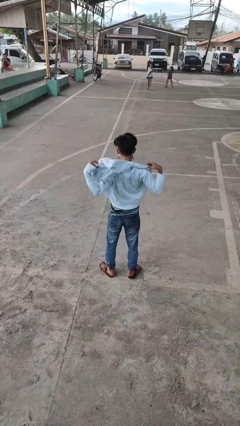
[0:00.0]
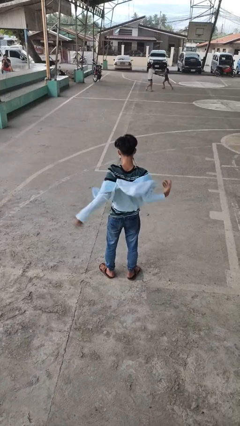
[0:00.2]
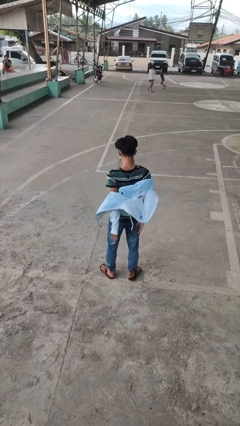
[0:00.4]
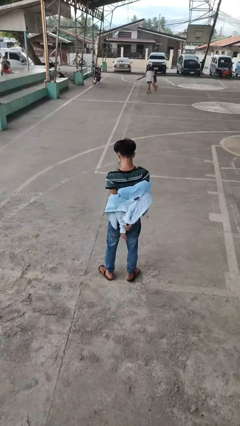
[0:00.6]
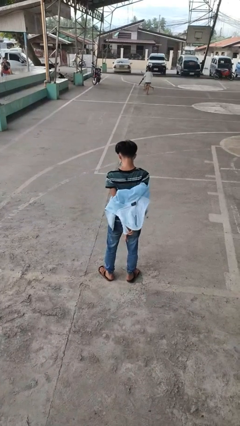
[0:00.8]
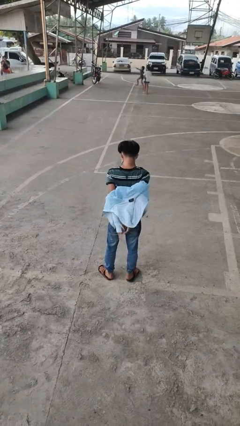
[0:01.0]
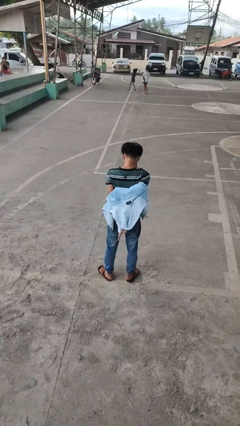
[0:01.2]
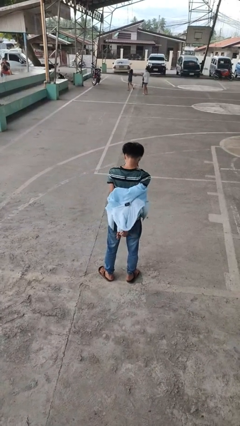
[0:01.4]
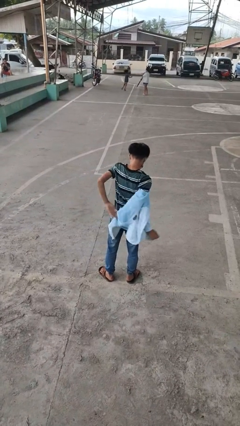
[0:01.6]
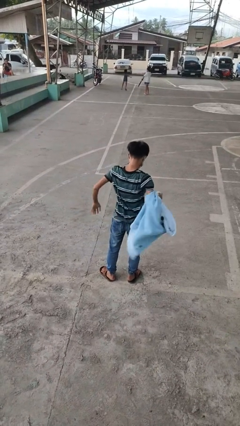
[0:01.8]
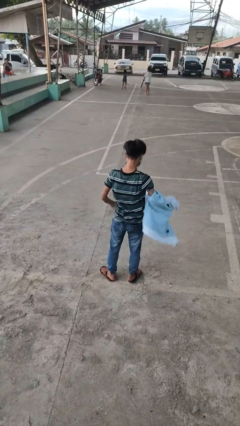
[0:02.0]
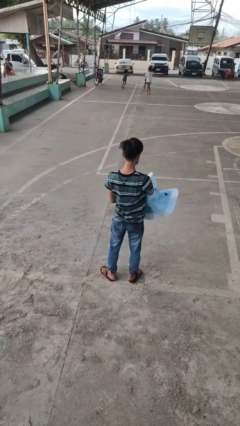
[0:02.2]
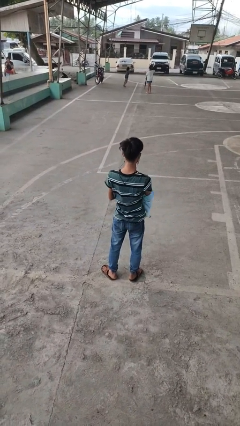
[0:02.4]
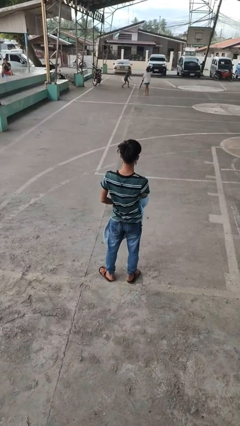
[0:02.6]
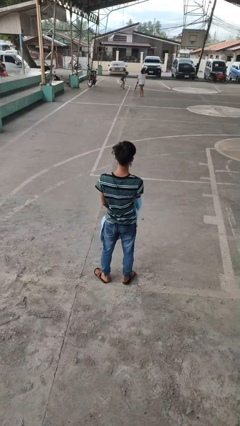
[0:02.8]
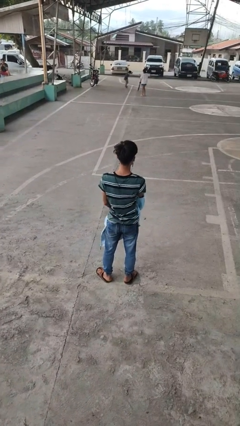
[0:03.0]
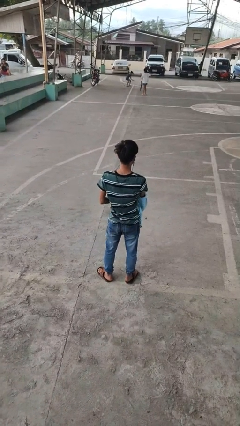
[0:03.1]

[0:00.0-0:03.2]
person takes off jacket

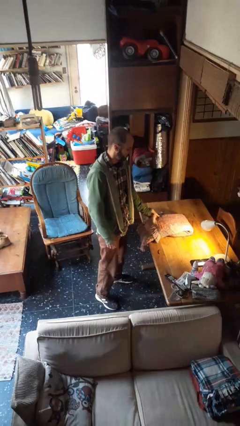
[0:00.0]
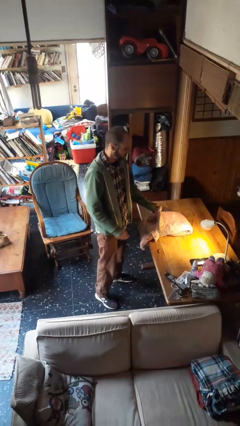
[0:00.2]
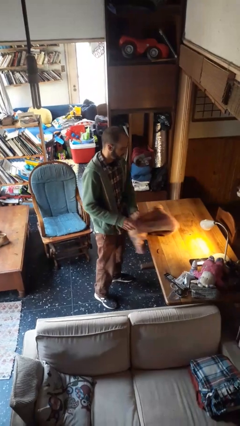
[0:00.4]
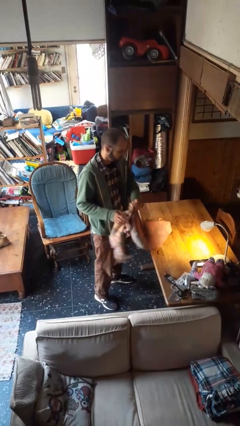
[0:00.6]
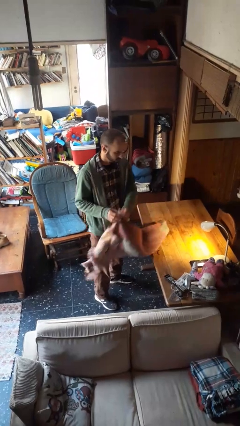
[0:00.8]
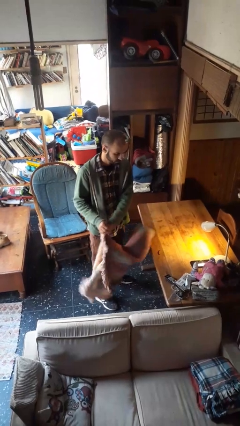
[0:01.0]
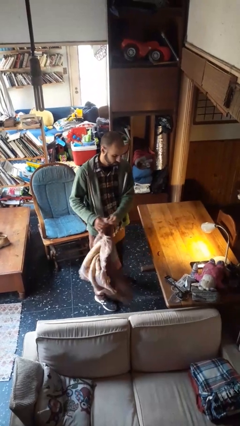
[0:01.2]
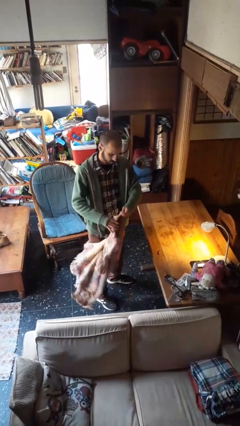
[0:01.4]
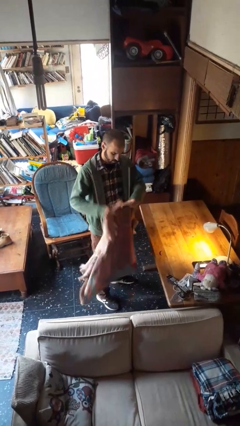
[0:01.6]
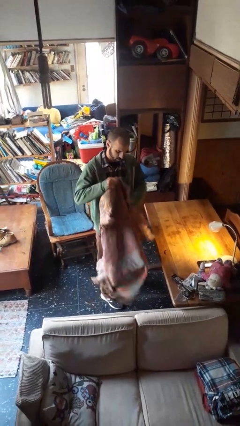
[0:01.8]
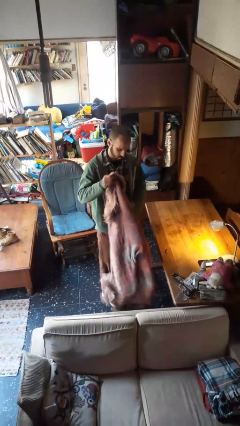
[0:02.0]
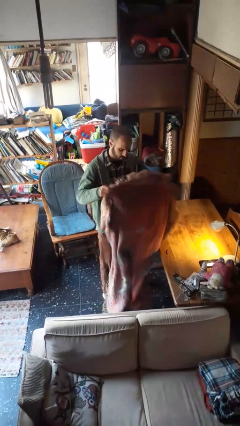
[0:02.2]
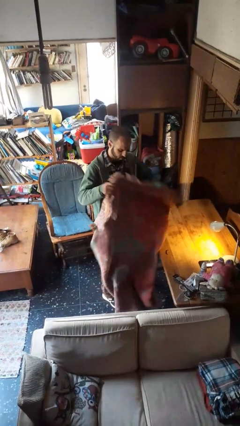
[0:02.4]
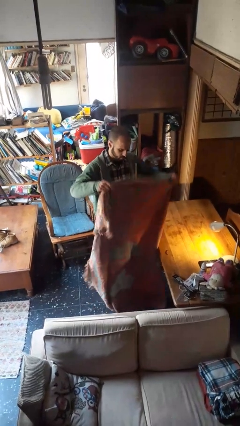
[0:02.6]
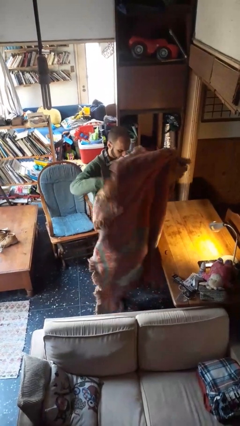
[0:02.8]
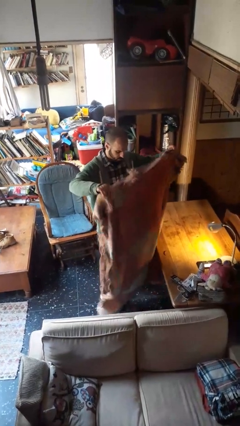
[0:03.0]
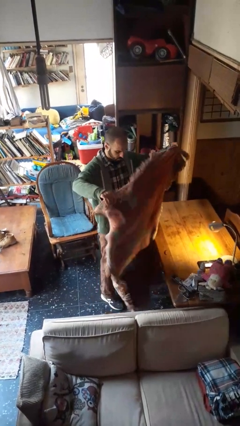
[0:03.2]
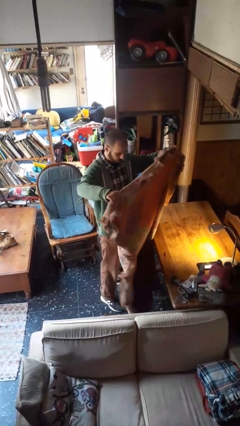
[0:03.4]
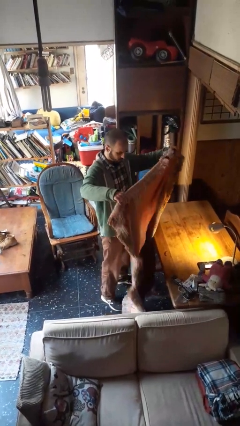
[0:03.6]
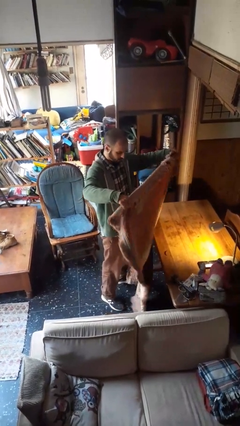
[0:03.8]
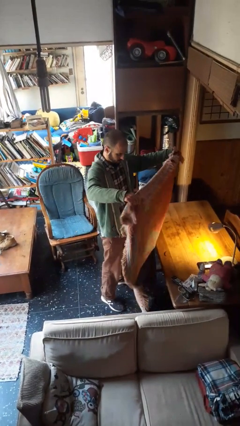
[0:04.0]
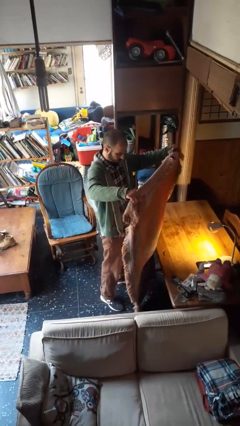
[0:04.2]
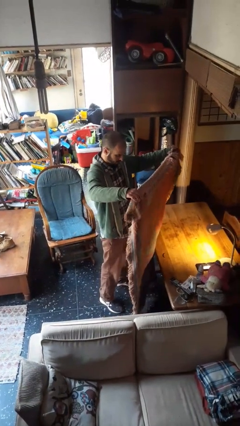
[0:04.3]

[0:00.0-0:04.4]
person unfolds blanket

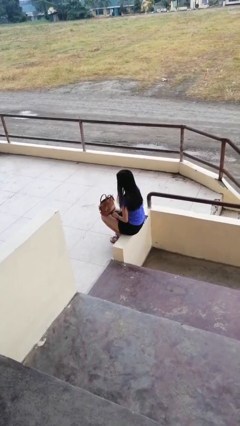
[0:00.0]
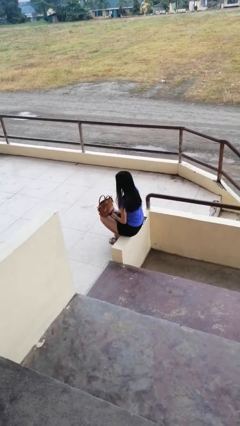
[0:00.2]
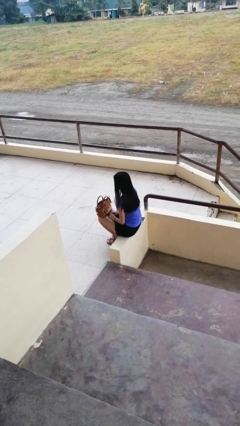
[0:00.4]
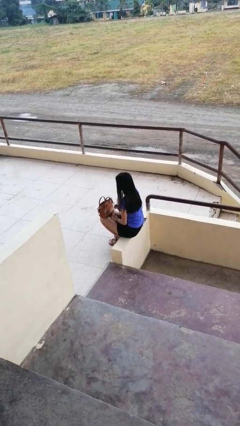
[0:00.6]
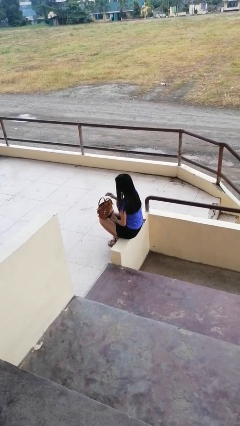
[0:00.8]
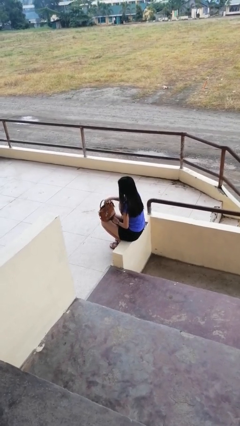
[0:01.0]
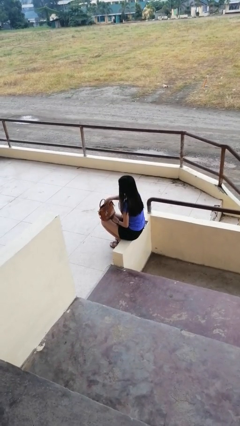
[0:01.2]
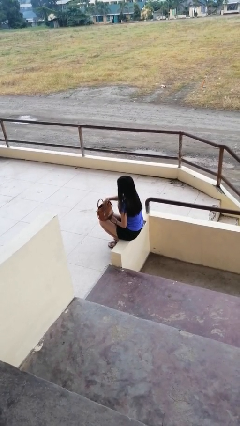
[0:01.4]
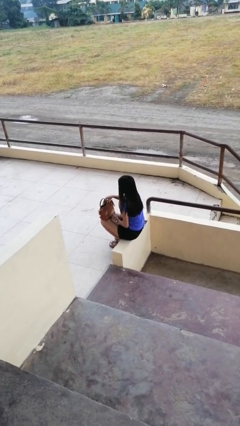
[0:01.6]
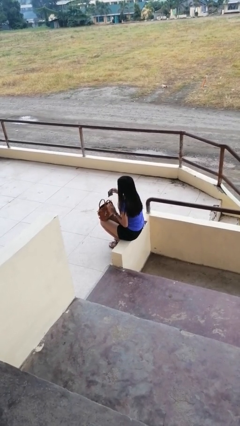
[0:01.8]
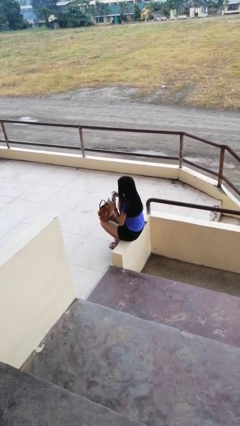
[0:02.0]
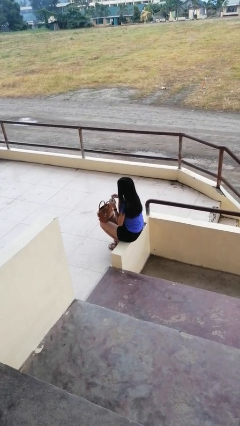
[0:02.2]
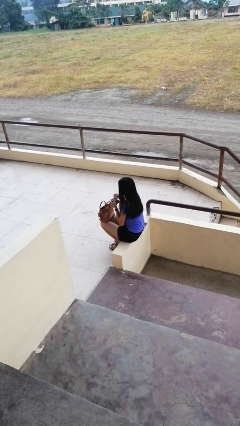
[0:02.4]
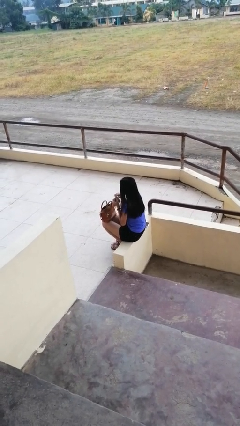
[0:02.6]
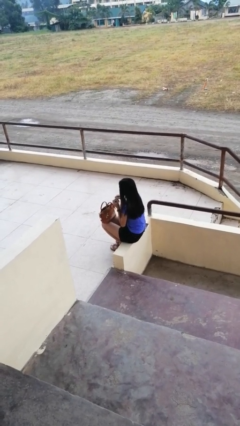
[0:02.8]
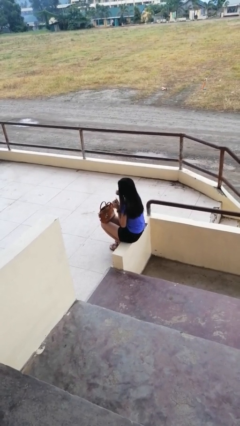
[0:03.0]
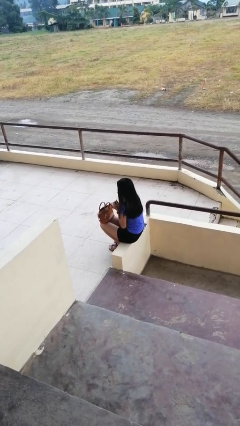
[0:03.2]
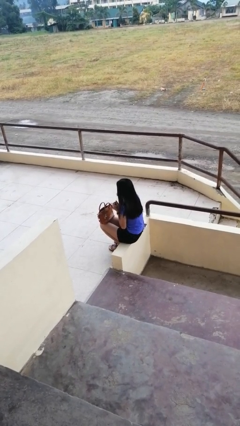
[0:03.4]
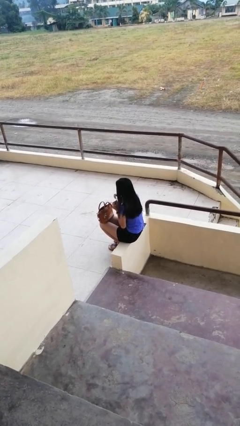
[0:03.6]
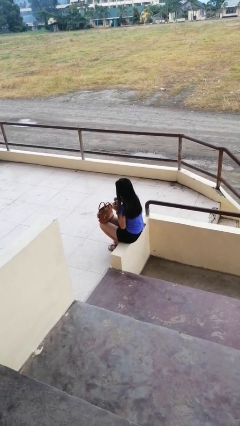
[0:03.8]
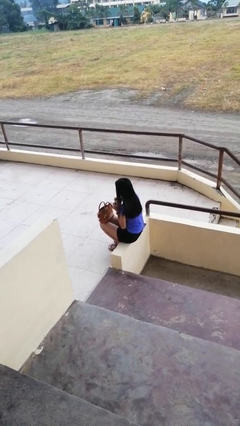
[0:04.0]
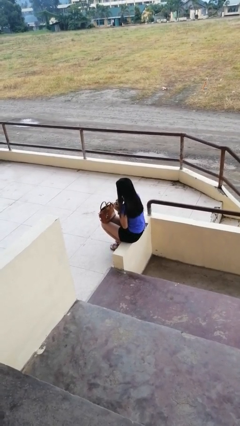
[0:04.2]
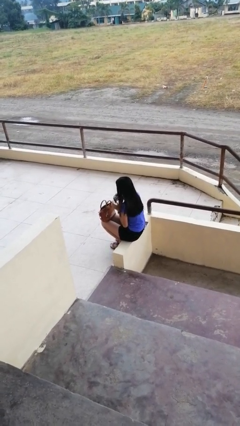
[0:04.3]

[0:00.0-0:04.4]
person eats snack from bag

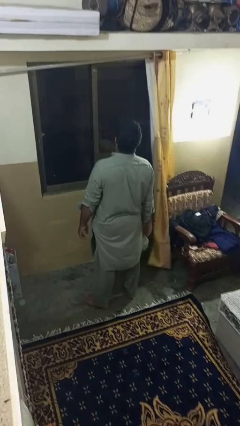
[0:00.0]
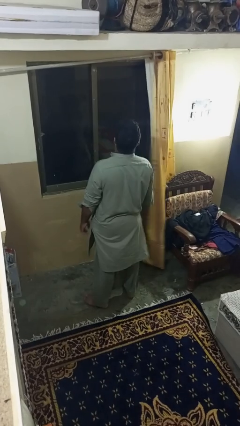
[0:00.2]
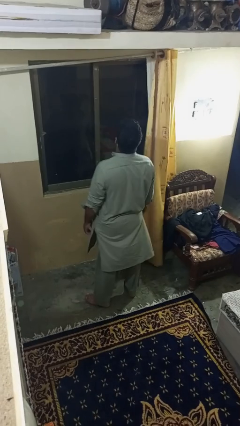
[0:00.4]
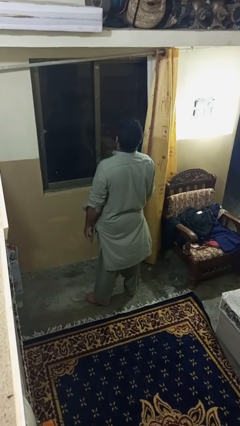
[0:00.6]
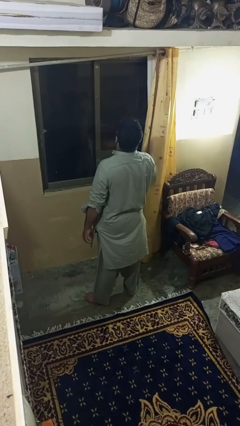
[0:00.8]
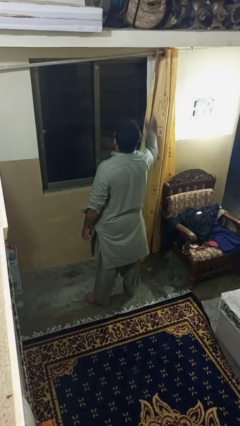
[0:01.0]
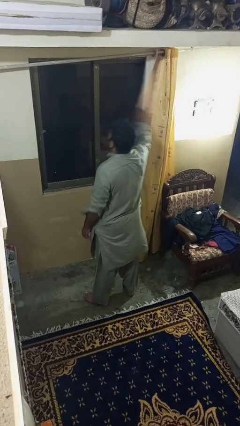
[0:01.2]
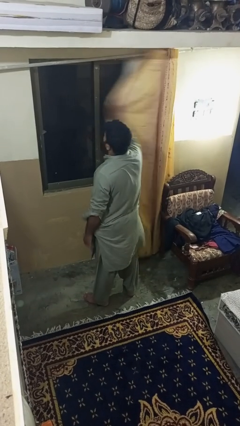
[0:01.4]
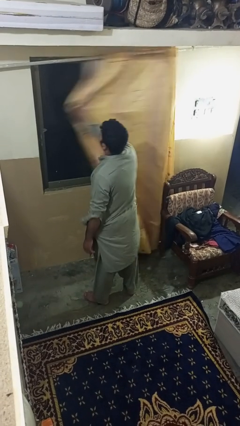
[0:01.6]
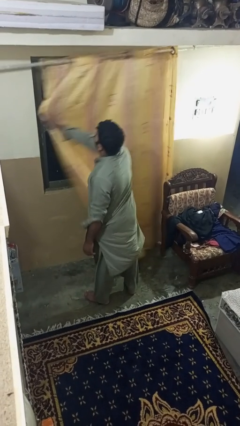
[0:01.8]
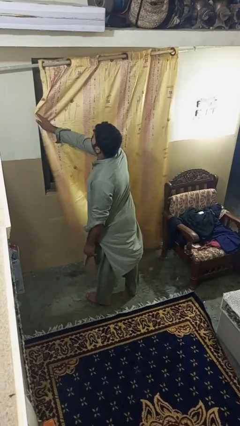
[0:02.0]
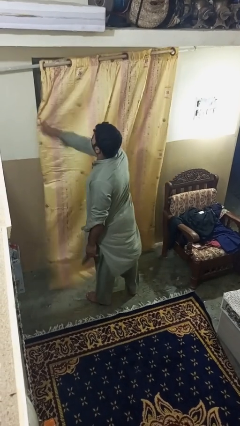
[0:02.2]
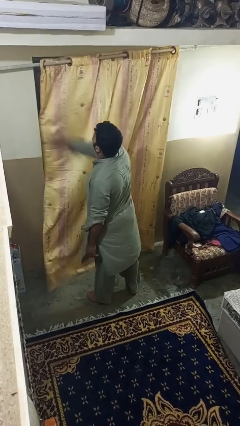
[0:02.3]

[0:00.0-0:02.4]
person closes curtains

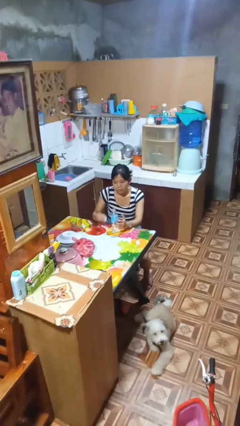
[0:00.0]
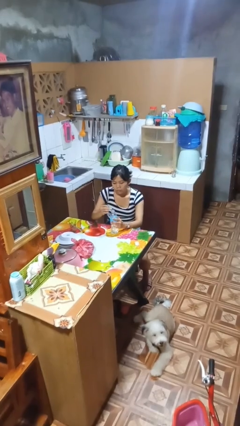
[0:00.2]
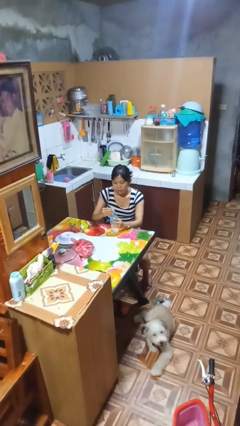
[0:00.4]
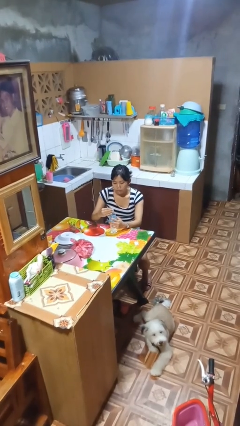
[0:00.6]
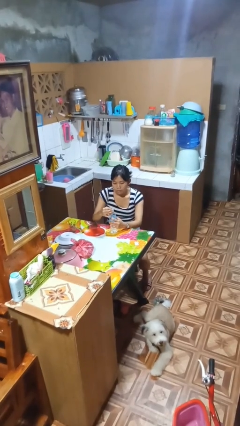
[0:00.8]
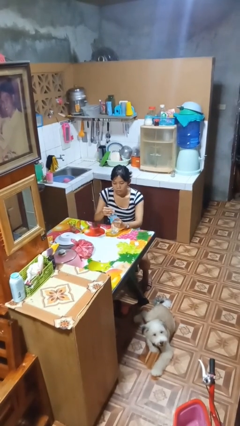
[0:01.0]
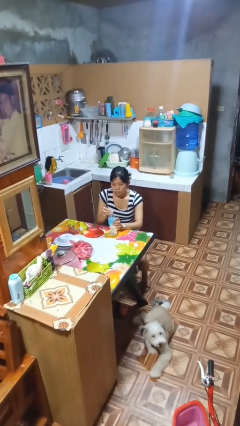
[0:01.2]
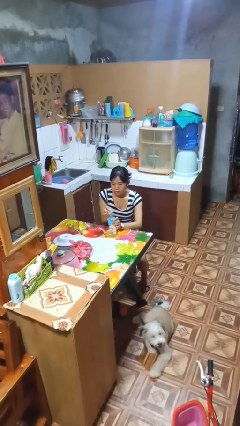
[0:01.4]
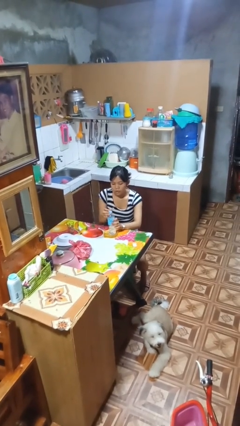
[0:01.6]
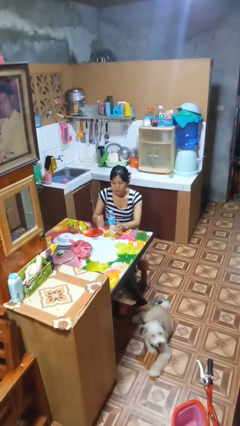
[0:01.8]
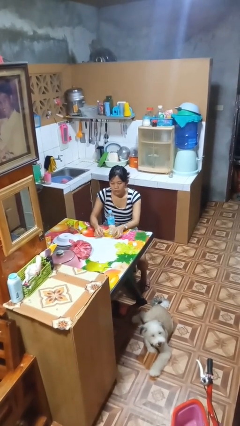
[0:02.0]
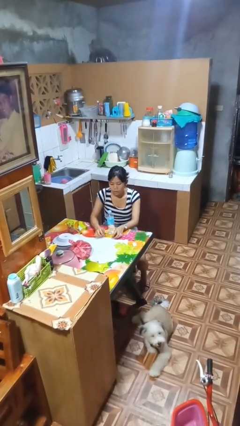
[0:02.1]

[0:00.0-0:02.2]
person screws lid to bottle

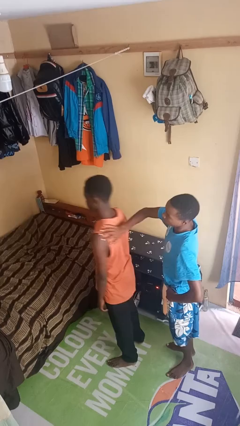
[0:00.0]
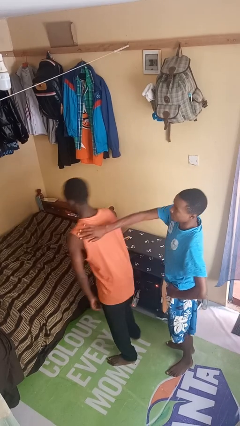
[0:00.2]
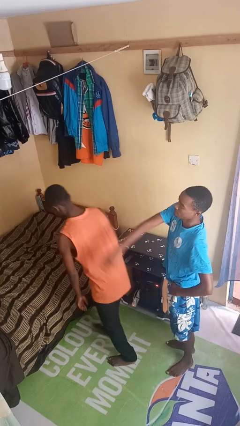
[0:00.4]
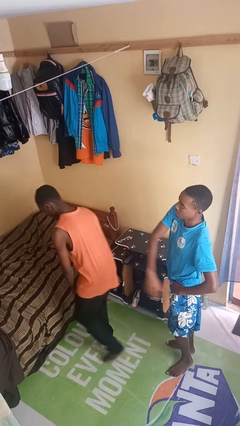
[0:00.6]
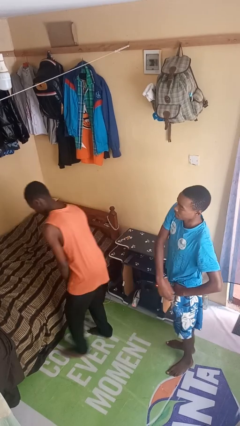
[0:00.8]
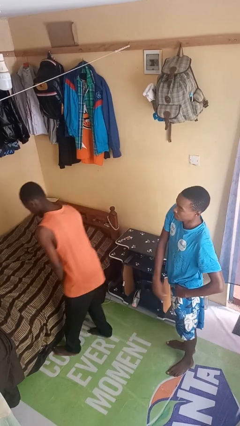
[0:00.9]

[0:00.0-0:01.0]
person shoves person
